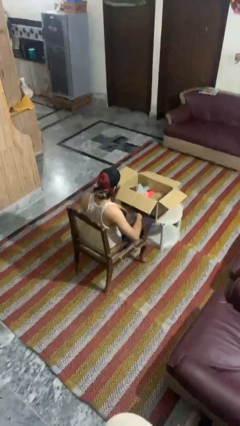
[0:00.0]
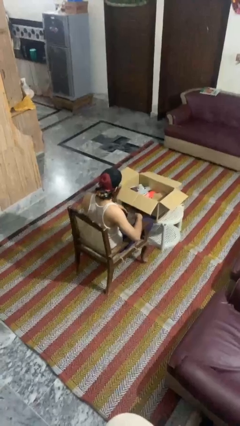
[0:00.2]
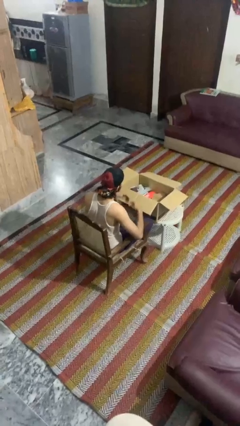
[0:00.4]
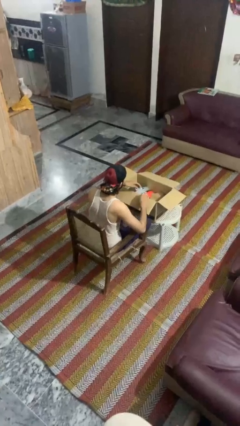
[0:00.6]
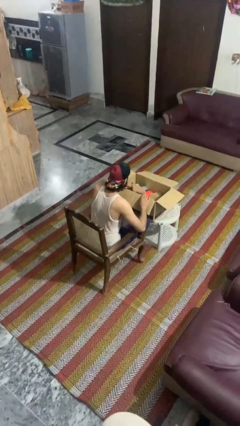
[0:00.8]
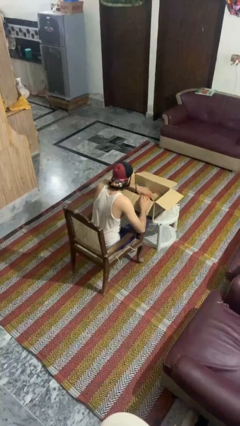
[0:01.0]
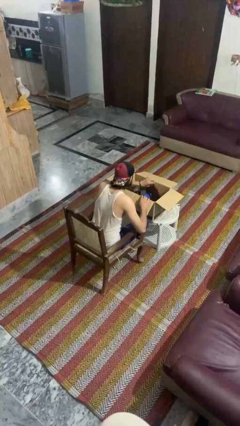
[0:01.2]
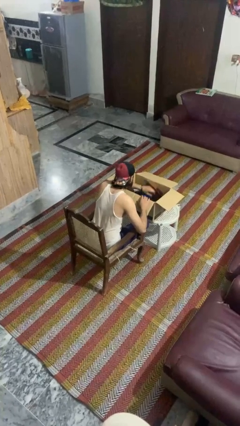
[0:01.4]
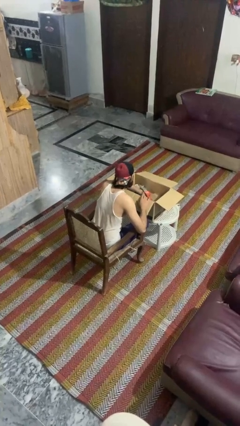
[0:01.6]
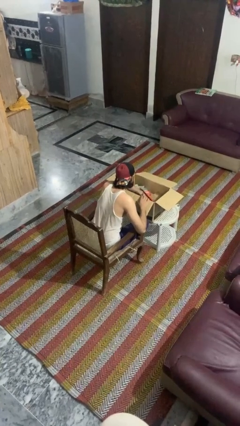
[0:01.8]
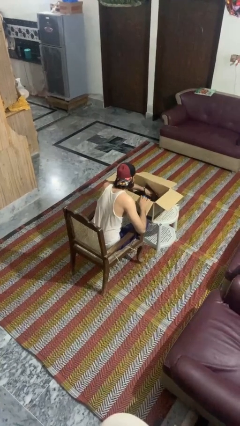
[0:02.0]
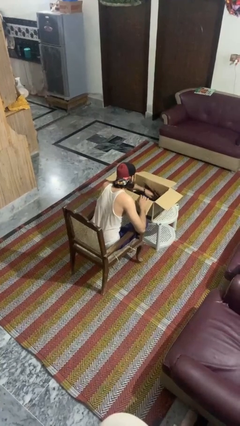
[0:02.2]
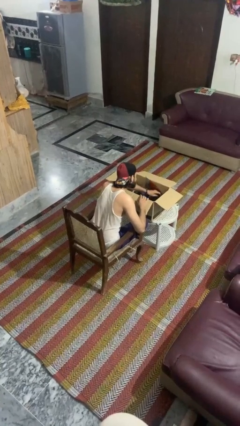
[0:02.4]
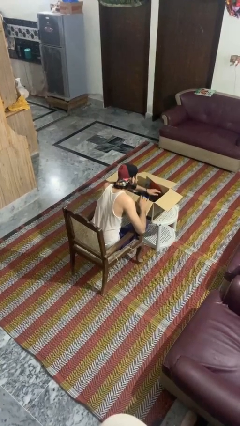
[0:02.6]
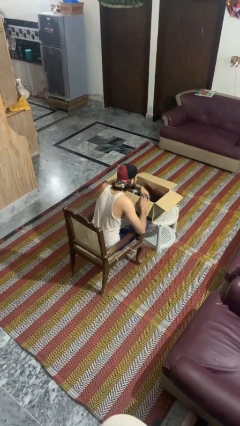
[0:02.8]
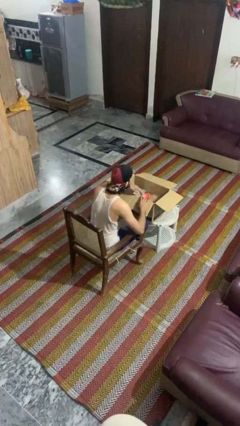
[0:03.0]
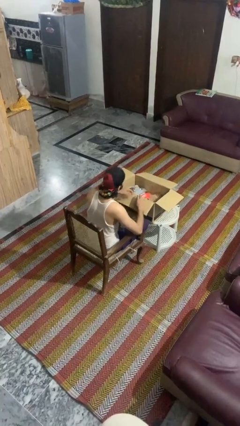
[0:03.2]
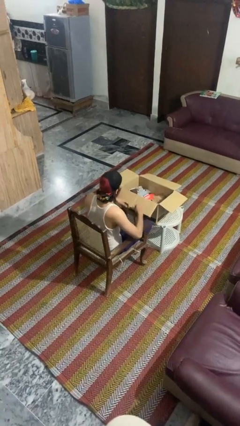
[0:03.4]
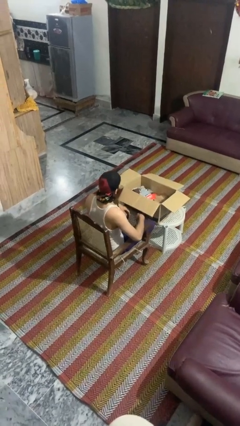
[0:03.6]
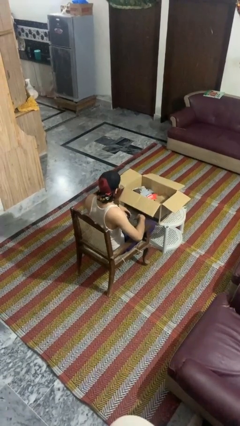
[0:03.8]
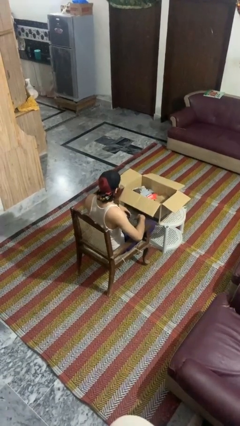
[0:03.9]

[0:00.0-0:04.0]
person searches in box

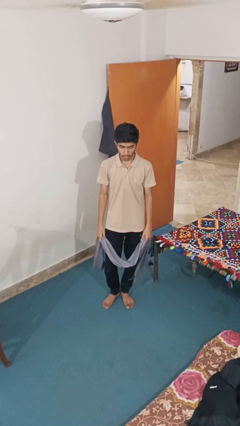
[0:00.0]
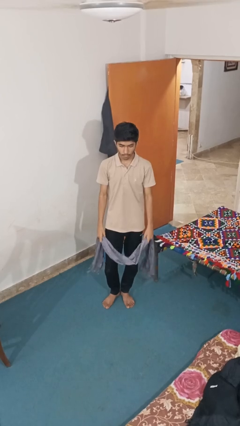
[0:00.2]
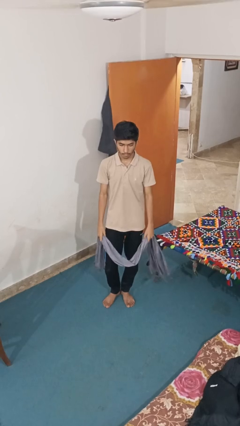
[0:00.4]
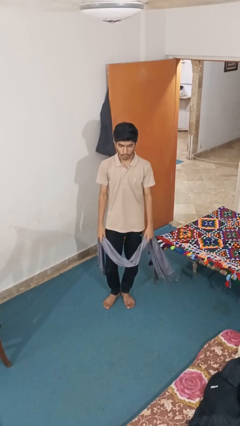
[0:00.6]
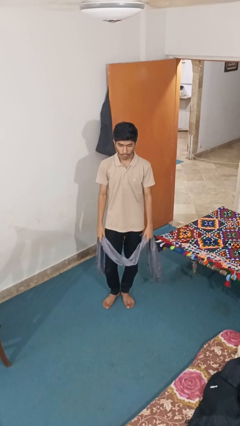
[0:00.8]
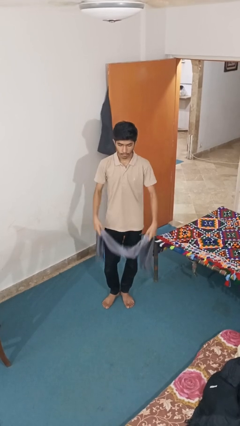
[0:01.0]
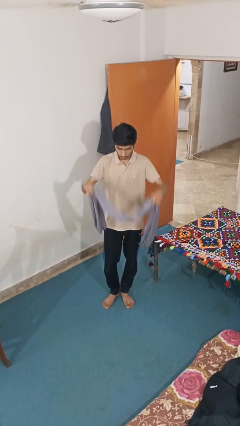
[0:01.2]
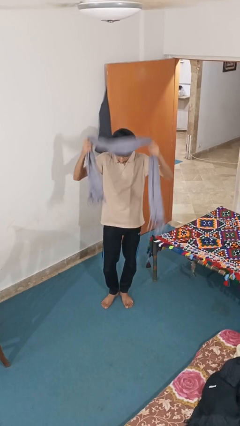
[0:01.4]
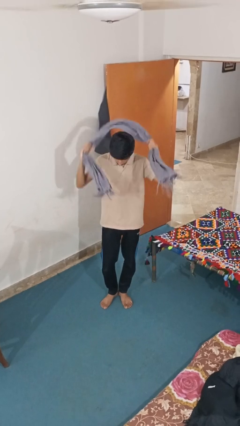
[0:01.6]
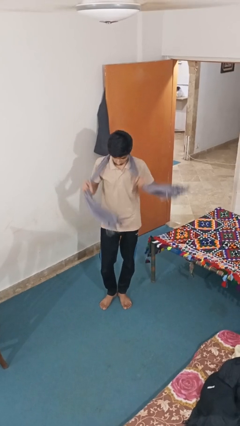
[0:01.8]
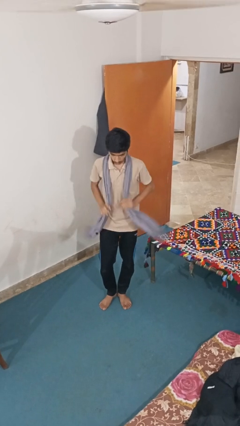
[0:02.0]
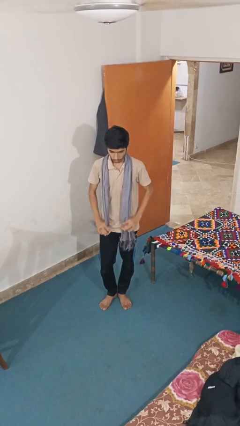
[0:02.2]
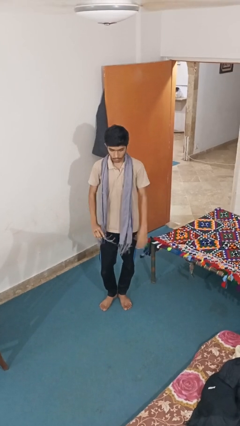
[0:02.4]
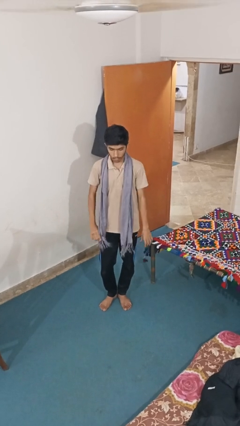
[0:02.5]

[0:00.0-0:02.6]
person puts on scarf

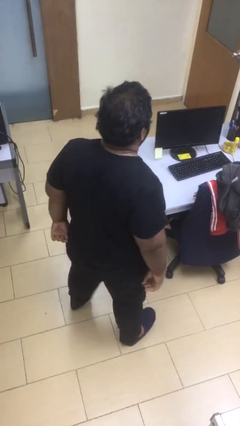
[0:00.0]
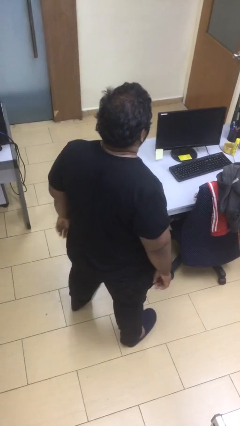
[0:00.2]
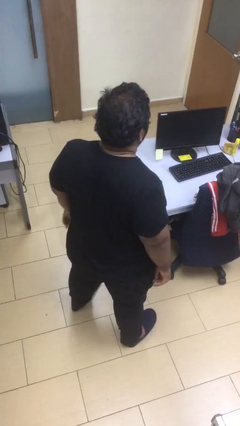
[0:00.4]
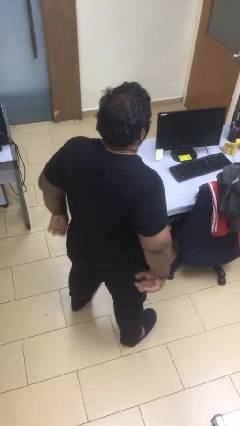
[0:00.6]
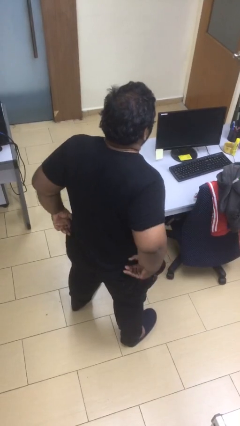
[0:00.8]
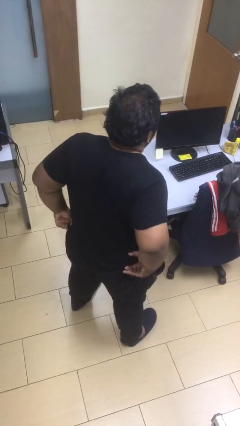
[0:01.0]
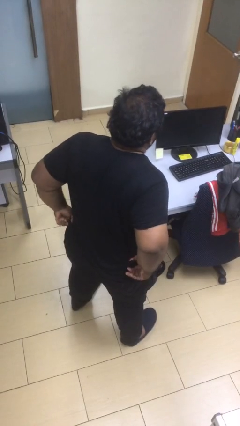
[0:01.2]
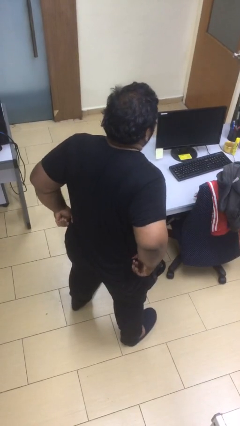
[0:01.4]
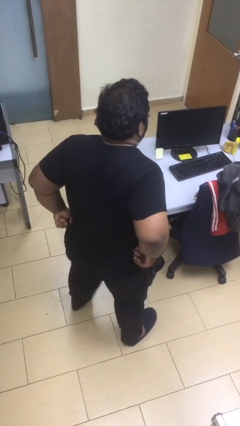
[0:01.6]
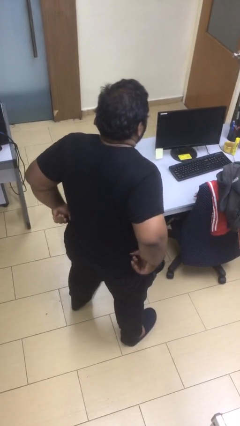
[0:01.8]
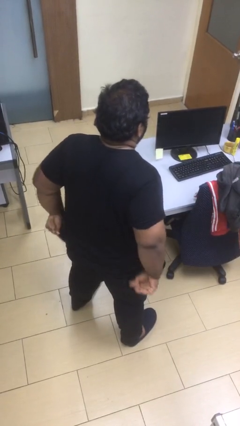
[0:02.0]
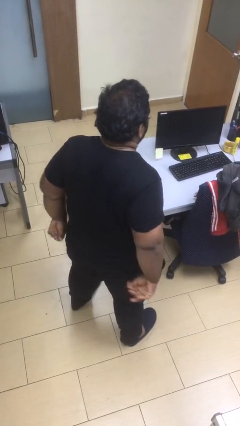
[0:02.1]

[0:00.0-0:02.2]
person hikes up pants

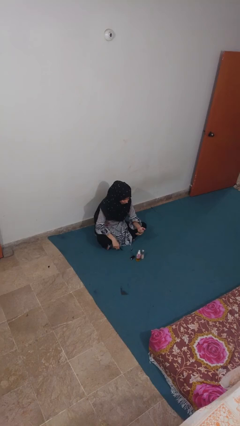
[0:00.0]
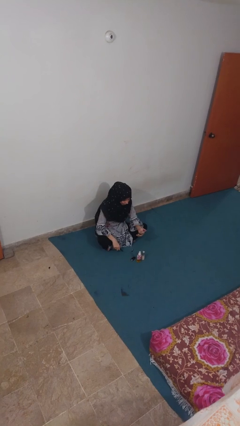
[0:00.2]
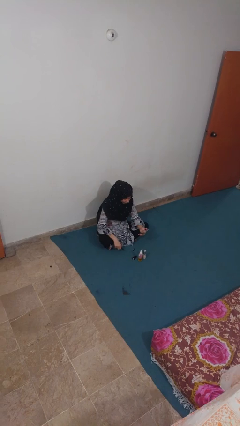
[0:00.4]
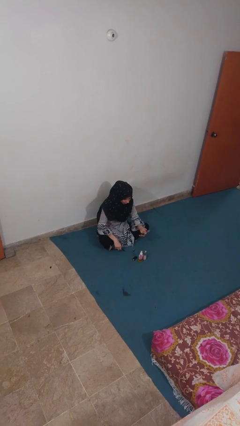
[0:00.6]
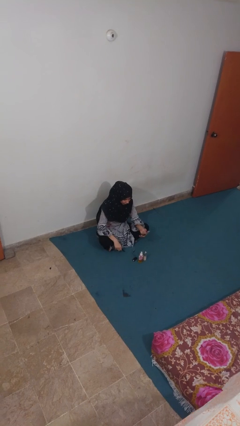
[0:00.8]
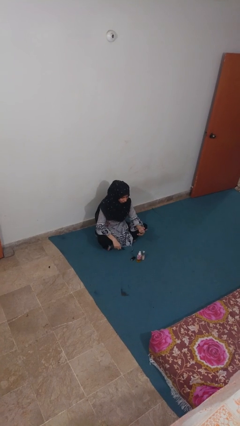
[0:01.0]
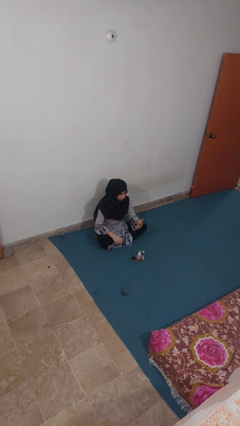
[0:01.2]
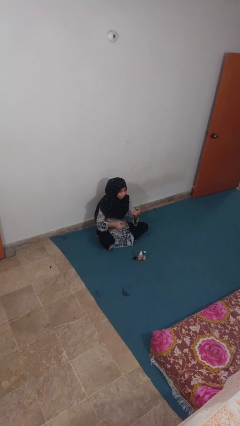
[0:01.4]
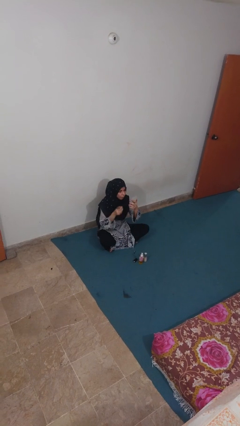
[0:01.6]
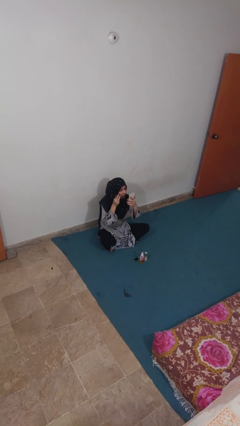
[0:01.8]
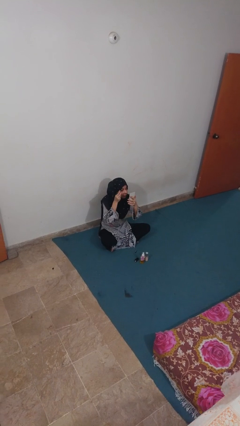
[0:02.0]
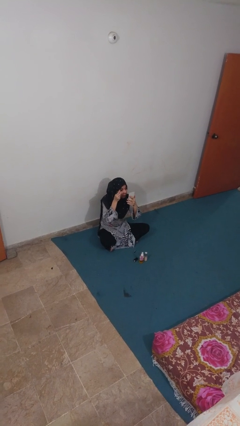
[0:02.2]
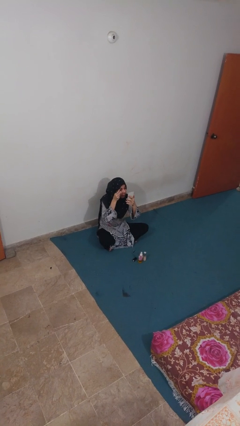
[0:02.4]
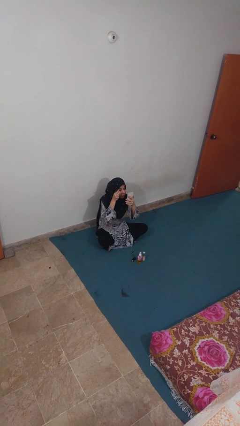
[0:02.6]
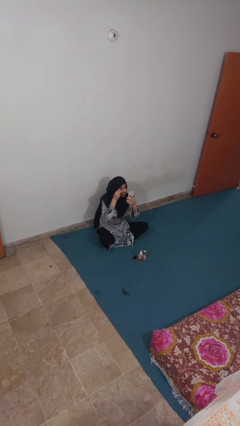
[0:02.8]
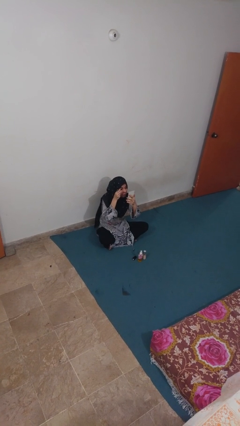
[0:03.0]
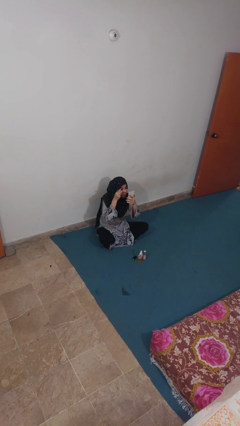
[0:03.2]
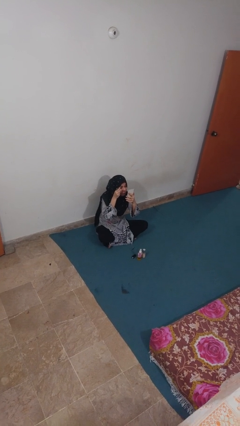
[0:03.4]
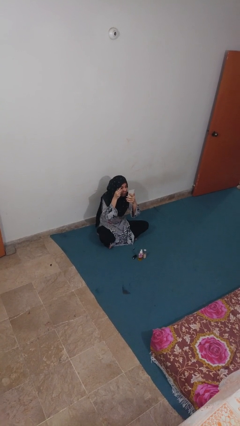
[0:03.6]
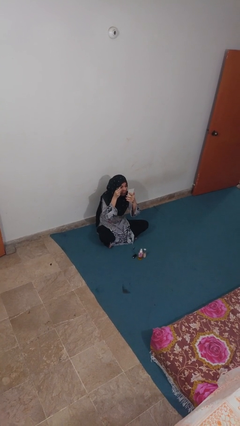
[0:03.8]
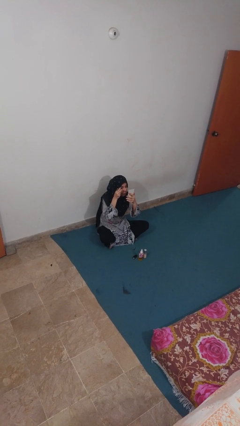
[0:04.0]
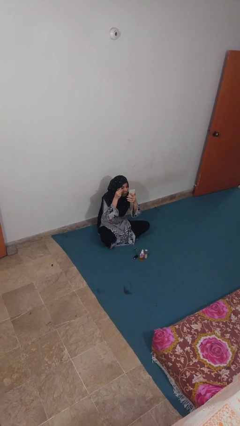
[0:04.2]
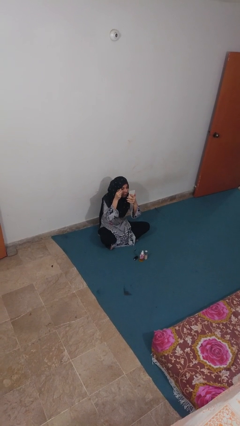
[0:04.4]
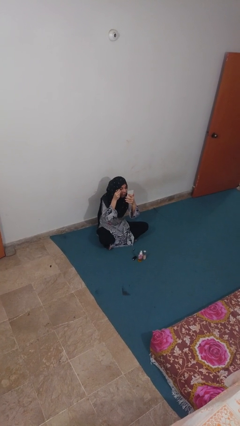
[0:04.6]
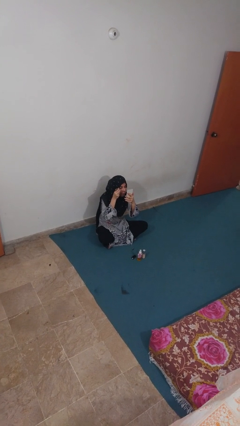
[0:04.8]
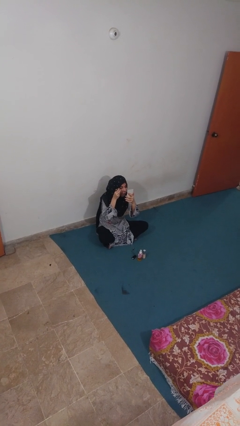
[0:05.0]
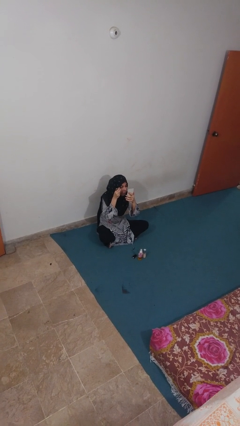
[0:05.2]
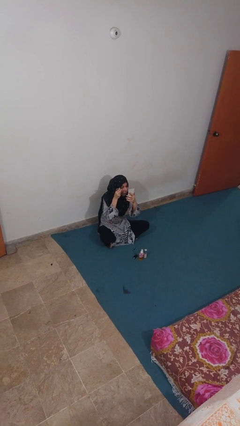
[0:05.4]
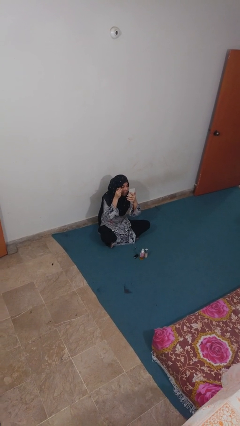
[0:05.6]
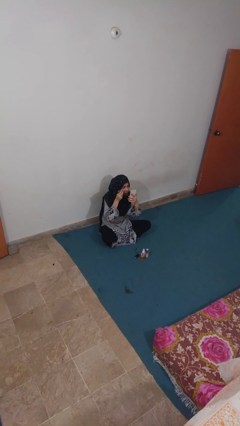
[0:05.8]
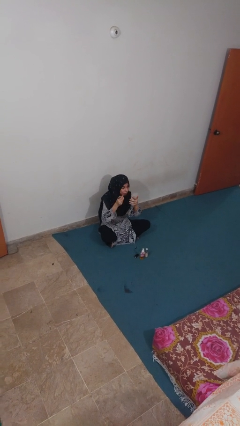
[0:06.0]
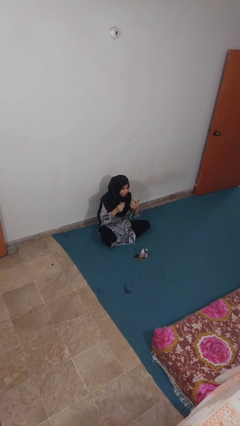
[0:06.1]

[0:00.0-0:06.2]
person applies eye makeup

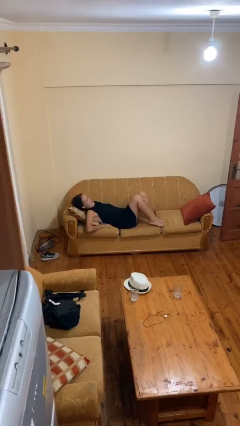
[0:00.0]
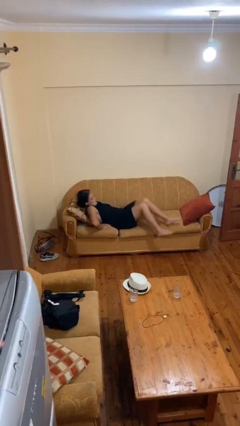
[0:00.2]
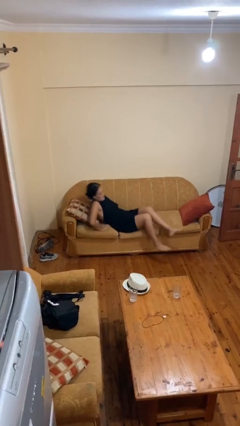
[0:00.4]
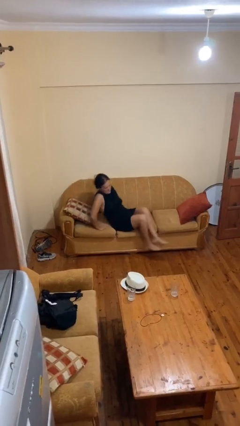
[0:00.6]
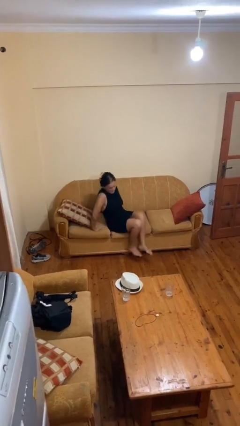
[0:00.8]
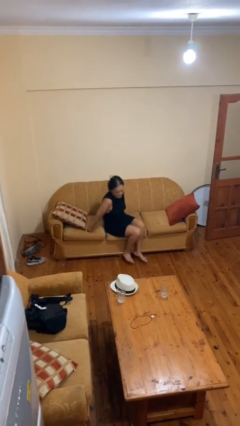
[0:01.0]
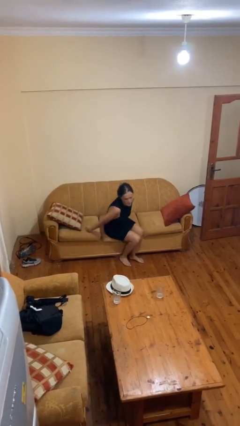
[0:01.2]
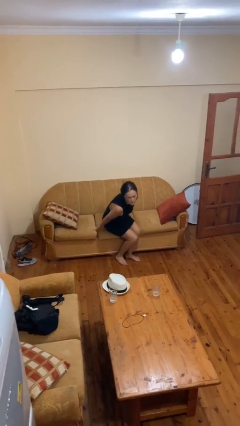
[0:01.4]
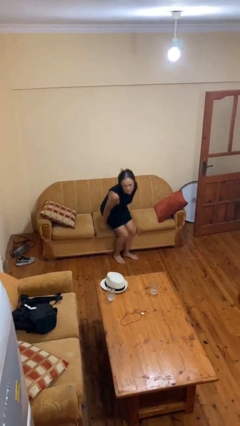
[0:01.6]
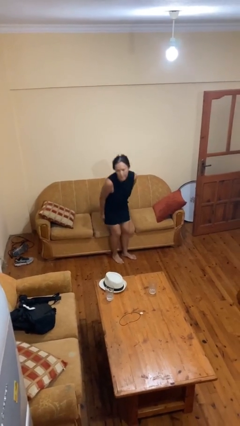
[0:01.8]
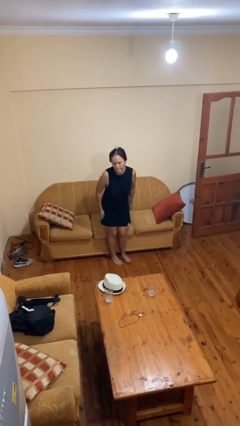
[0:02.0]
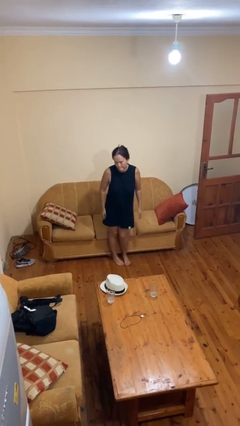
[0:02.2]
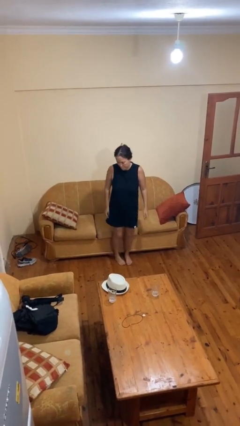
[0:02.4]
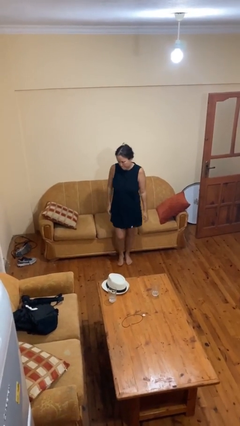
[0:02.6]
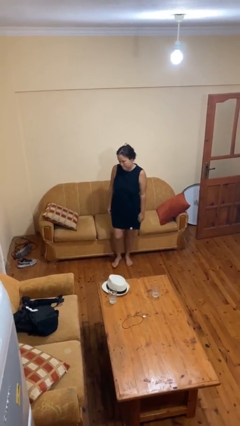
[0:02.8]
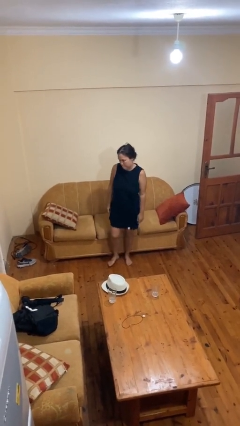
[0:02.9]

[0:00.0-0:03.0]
person stands up
